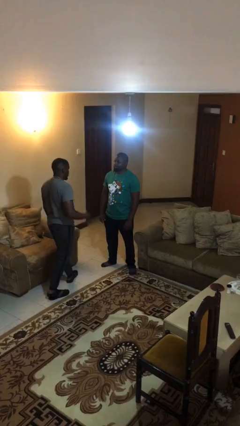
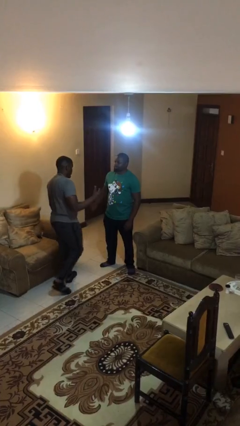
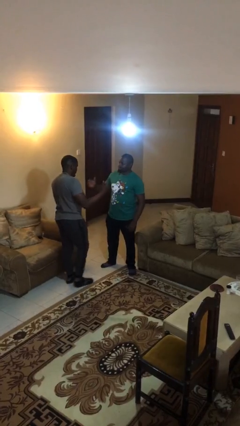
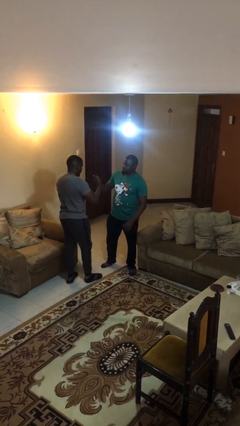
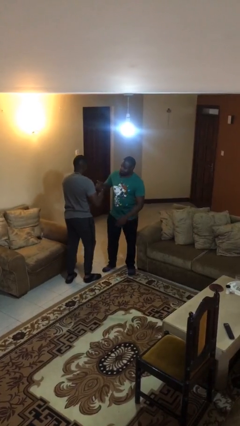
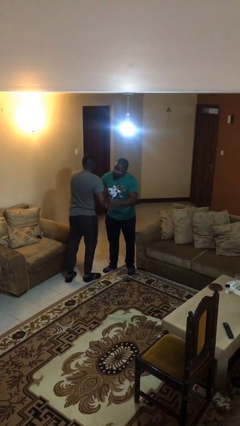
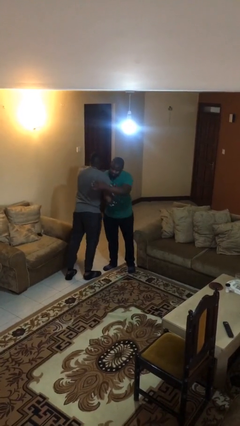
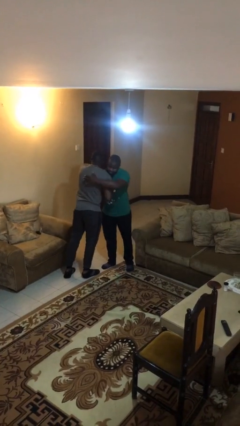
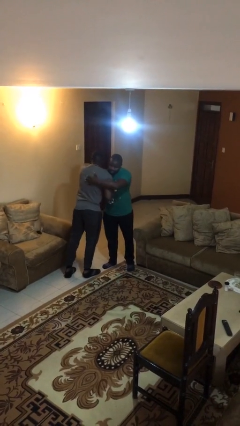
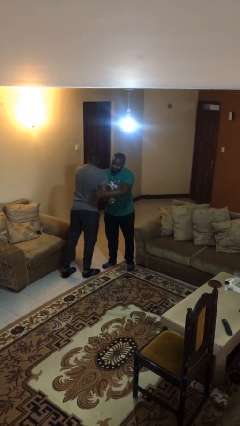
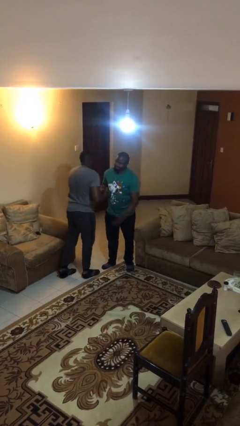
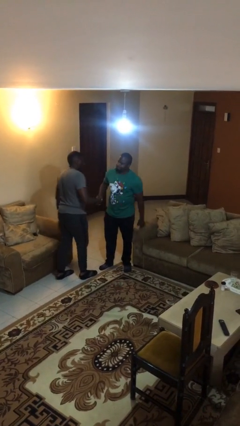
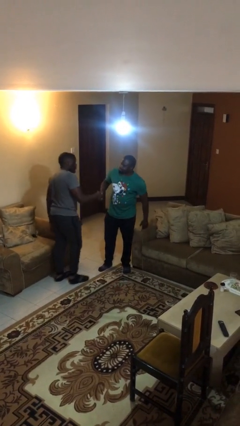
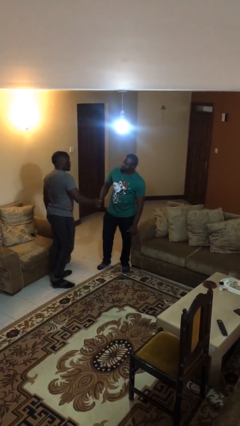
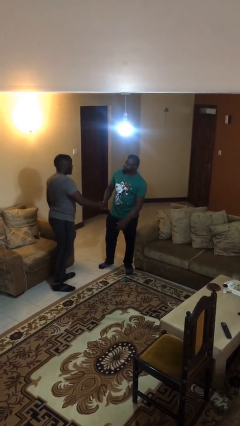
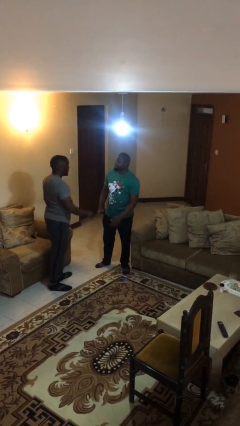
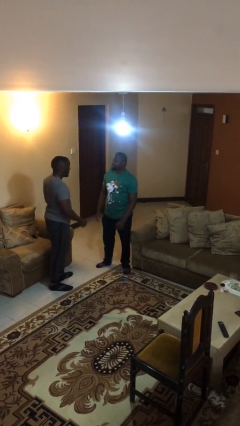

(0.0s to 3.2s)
person embraces person

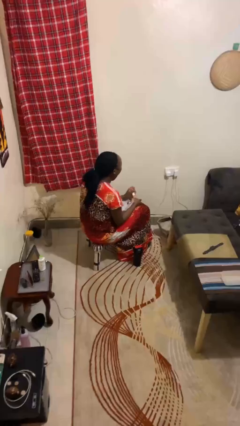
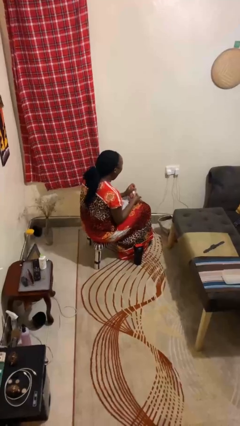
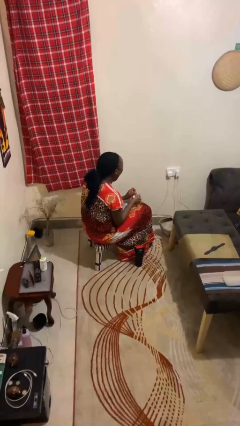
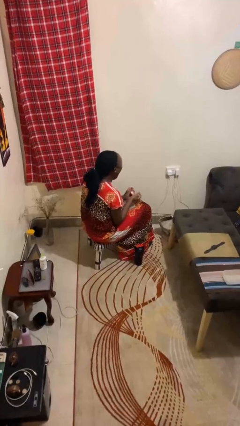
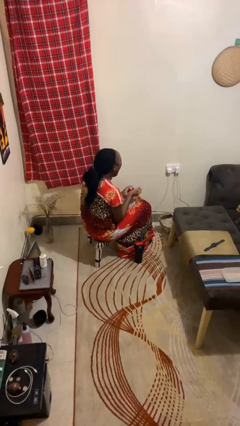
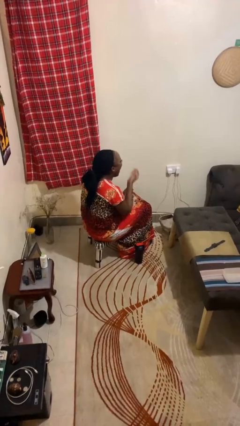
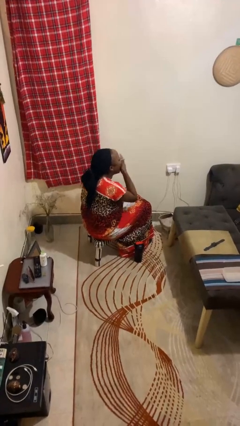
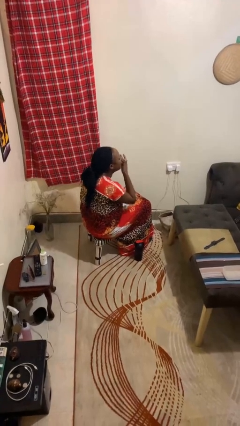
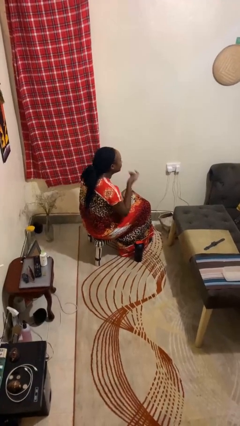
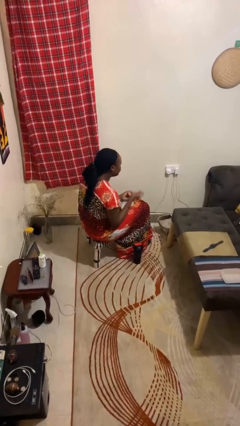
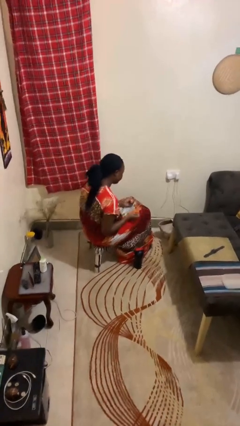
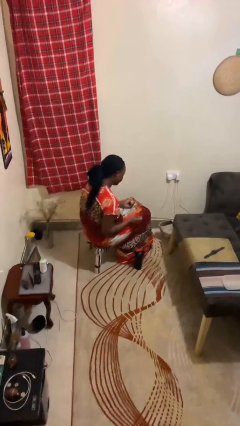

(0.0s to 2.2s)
person takes medicine pills

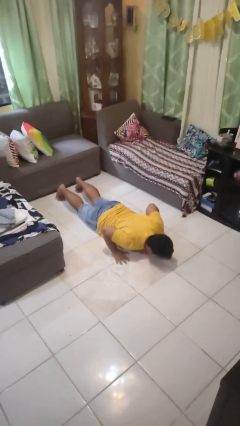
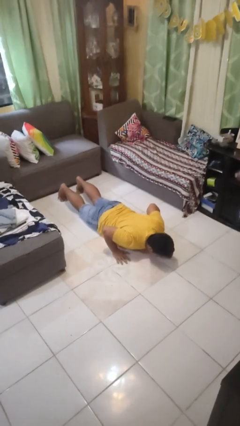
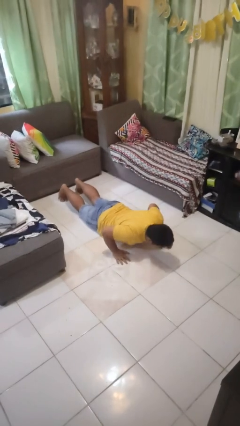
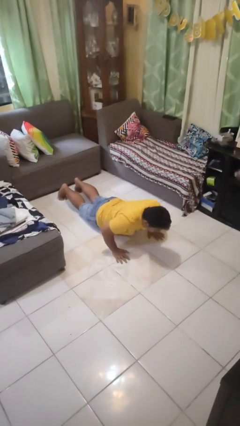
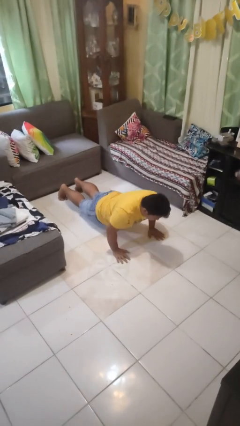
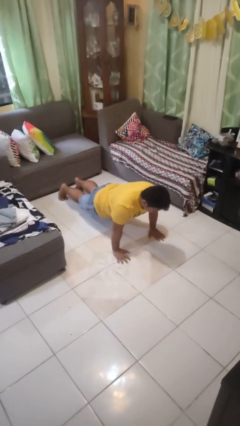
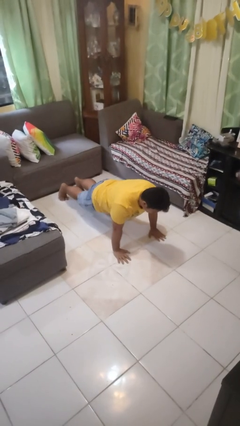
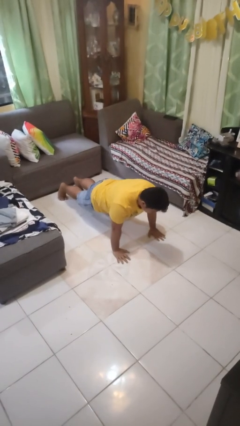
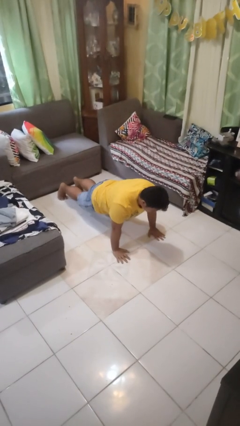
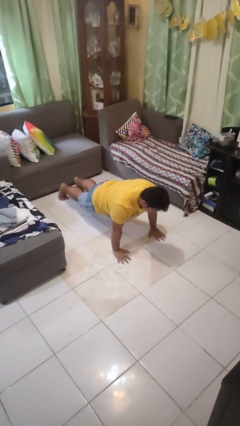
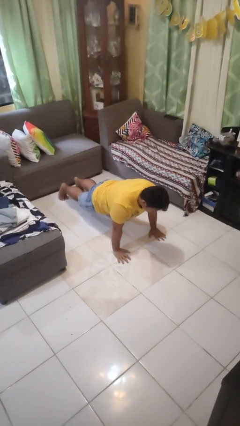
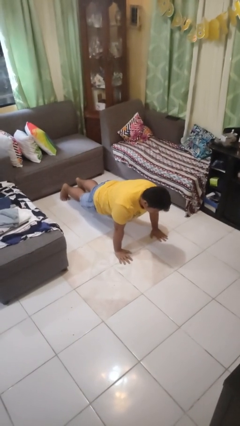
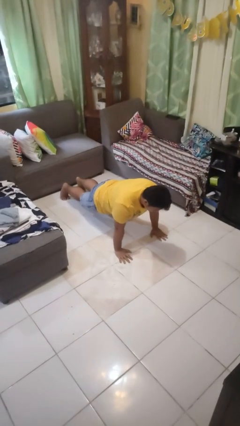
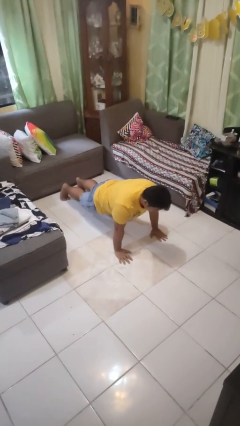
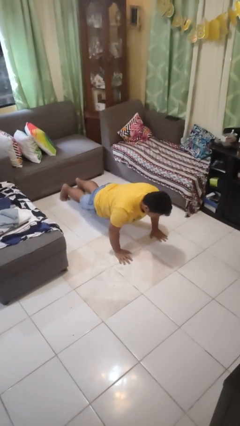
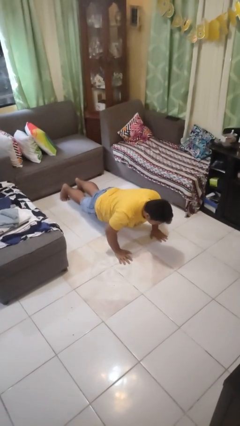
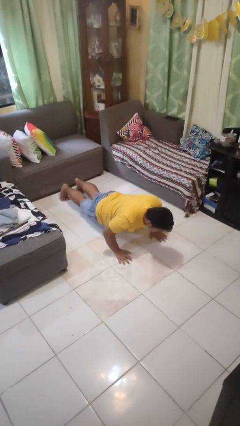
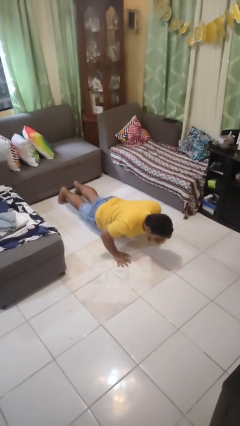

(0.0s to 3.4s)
person exercises with pushup

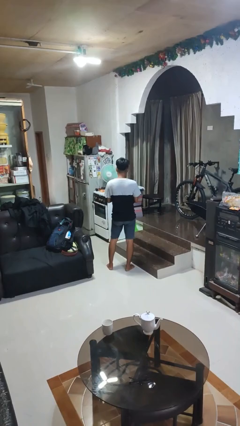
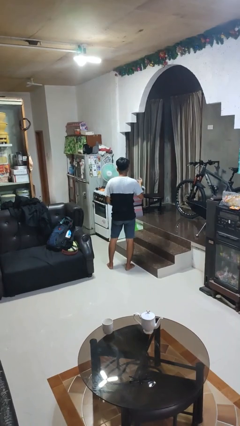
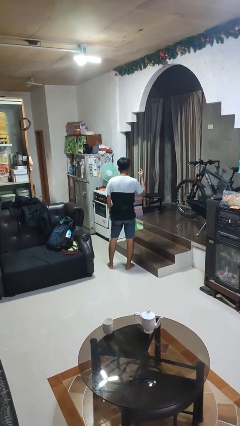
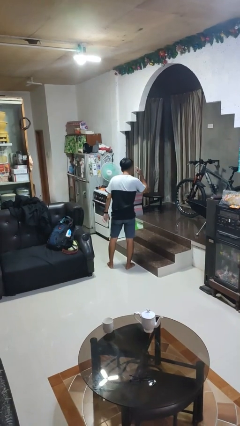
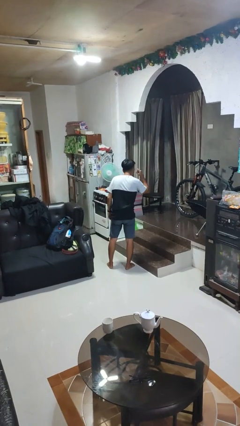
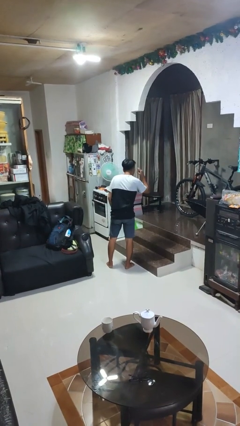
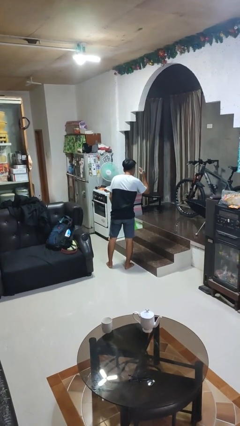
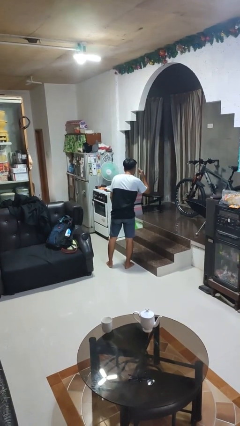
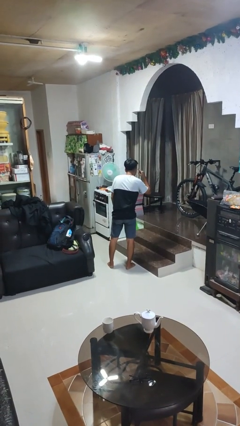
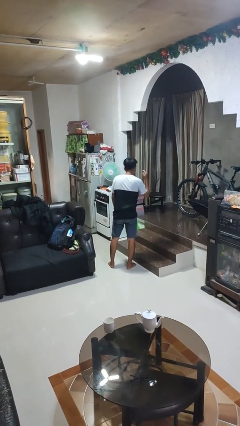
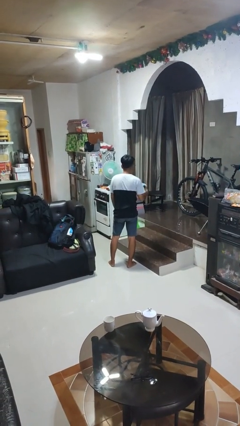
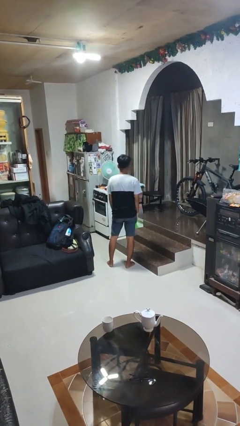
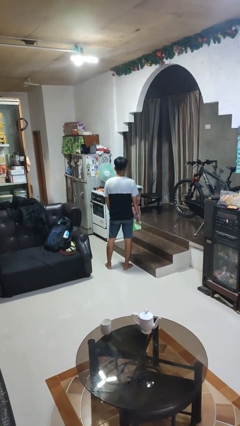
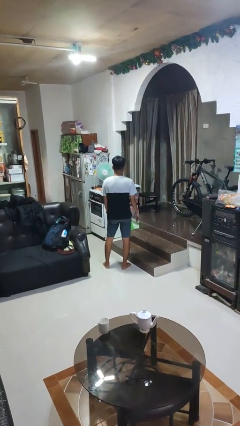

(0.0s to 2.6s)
person gestures listen closely

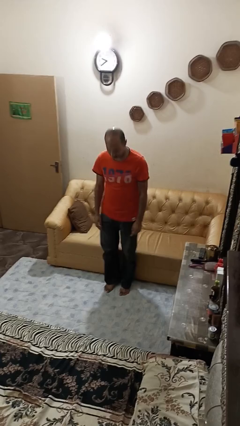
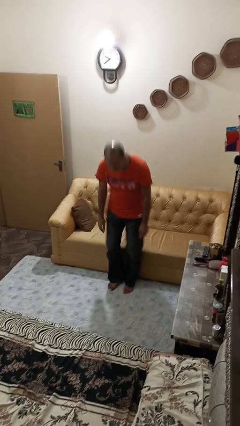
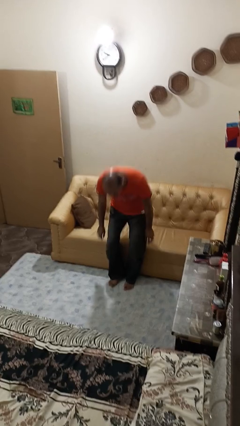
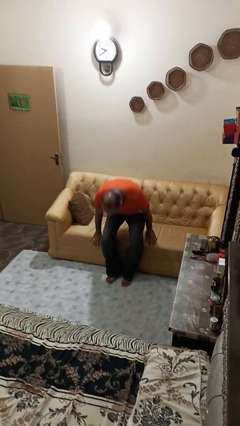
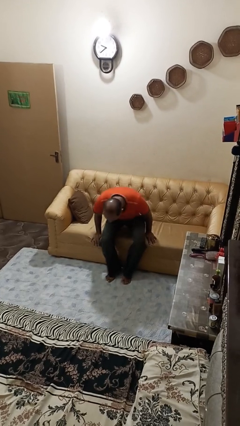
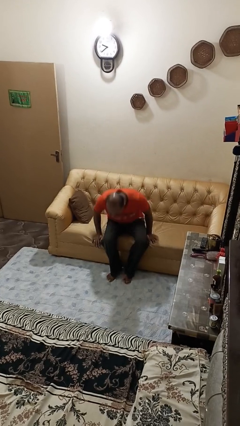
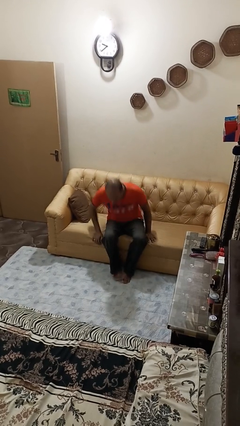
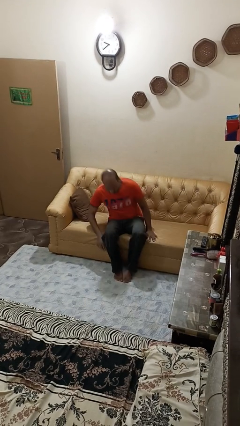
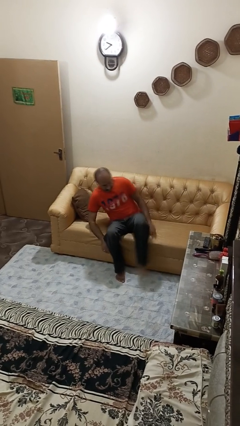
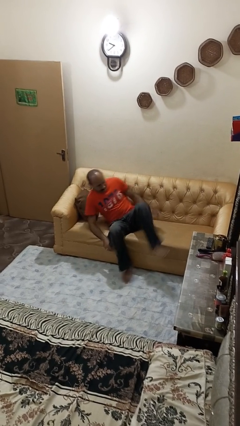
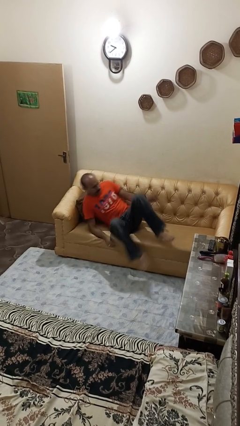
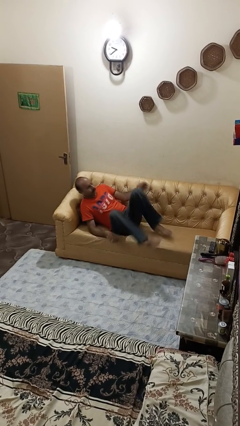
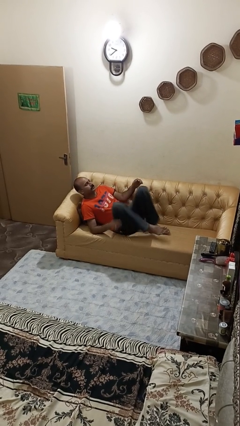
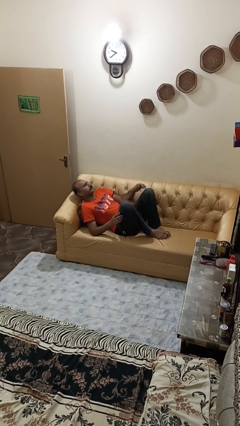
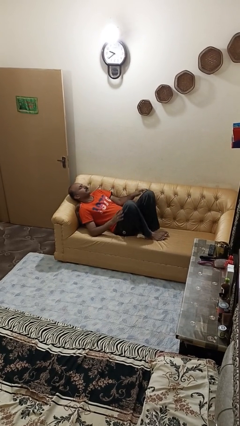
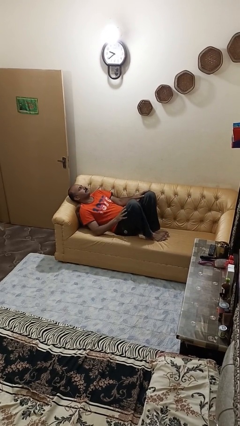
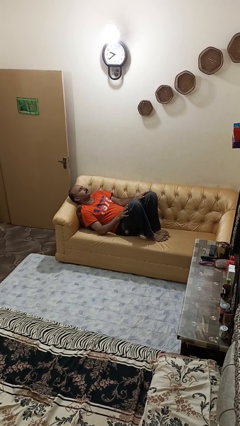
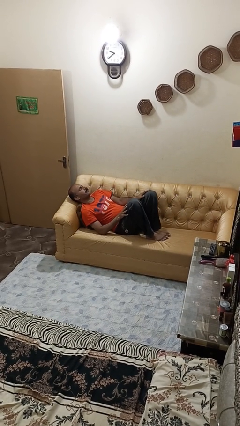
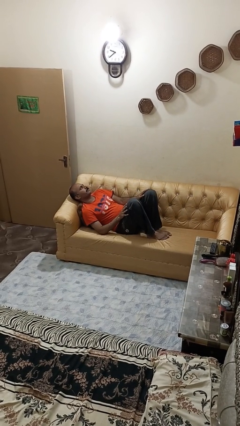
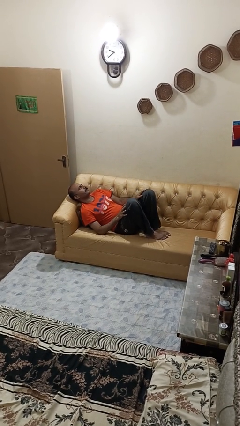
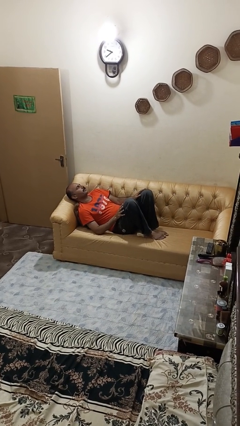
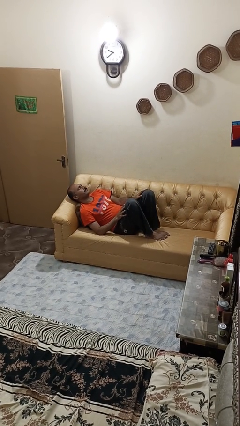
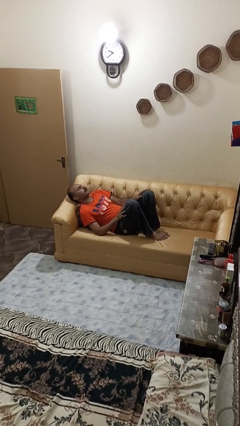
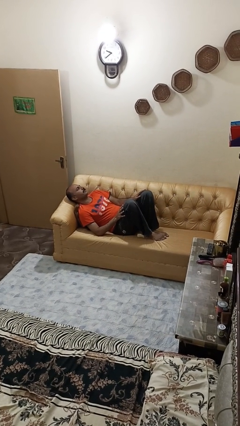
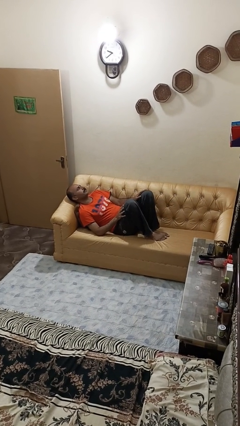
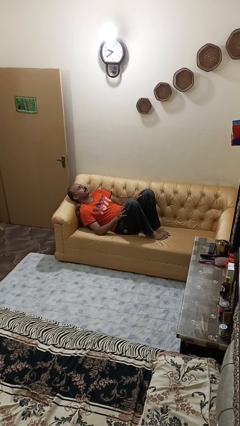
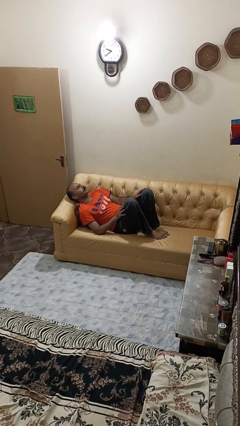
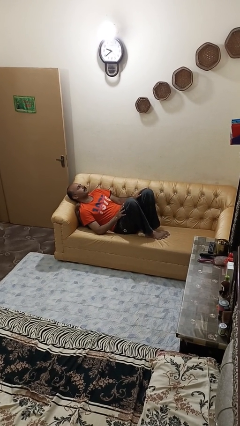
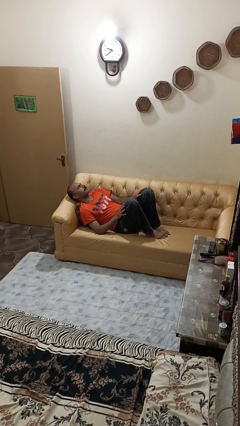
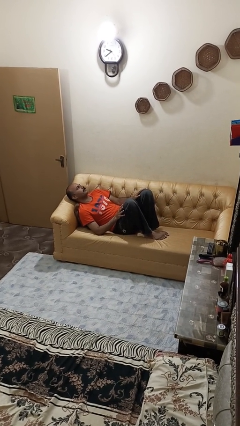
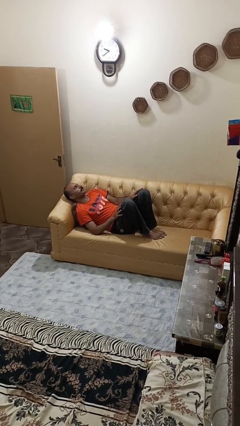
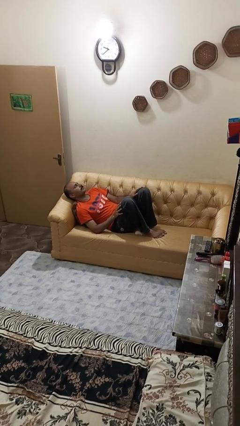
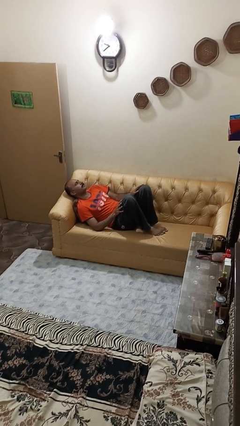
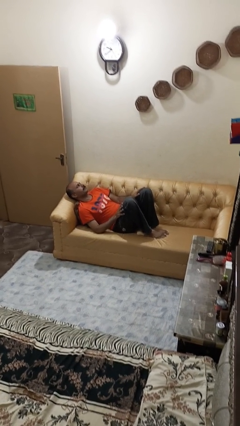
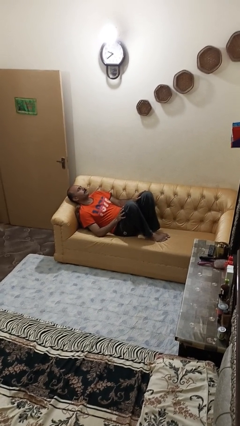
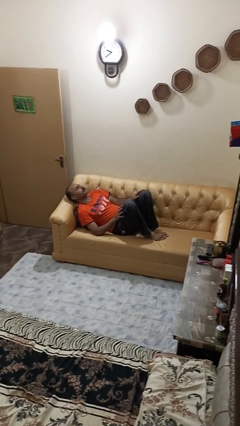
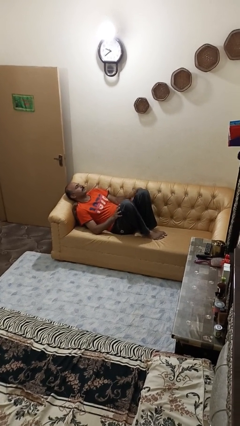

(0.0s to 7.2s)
person lies down on couch
